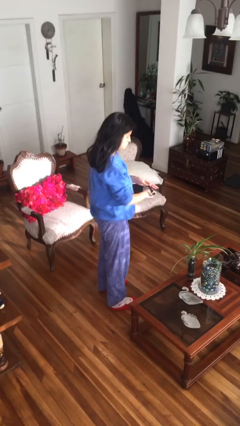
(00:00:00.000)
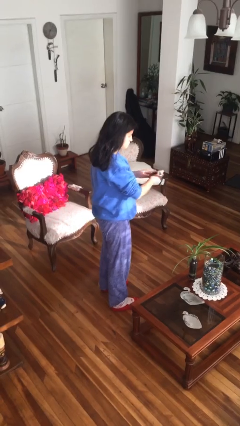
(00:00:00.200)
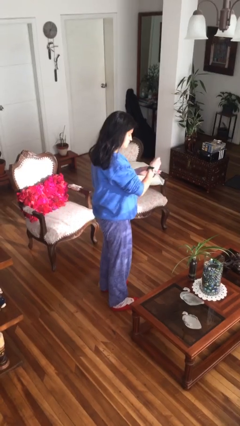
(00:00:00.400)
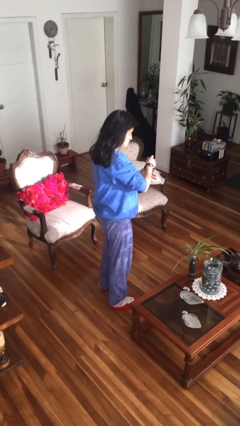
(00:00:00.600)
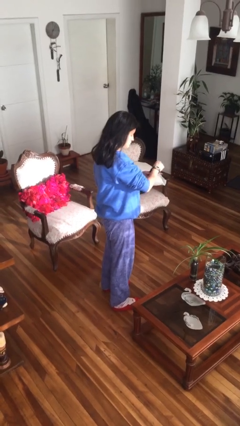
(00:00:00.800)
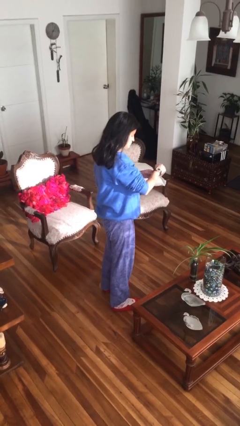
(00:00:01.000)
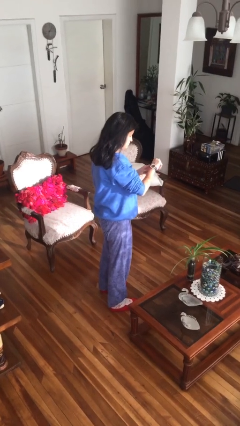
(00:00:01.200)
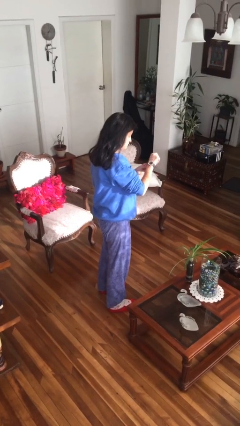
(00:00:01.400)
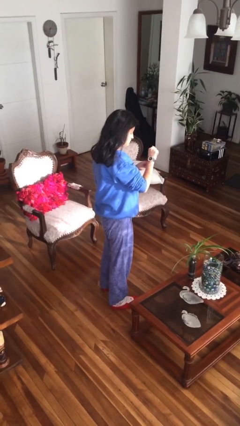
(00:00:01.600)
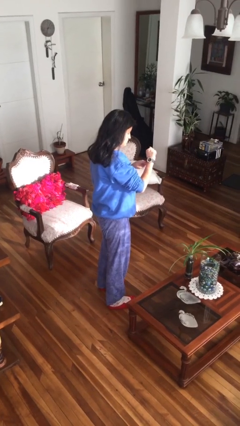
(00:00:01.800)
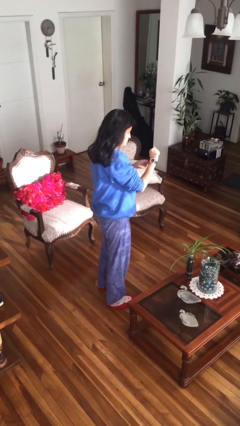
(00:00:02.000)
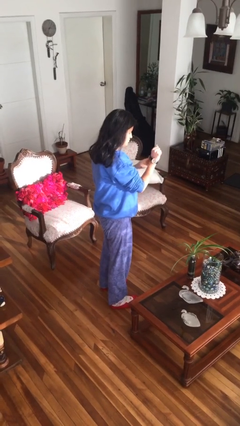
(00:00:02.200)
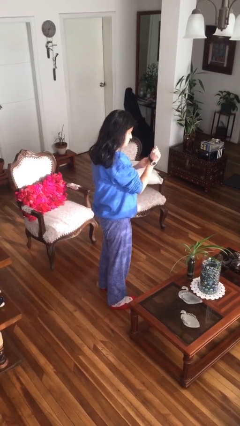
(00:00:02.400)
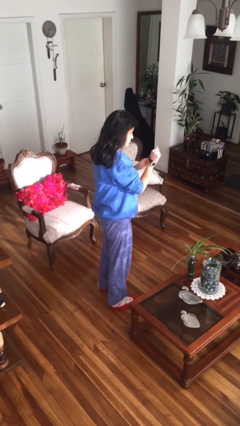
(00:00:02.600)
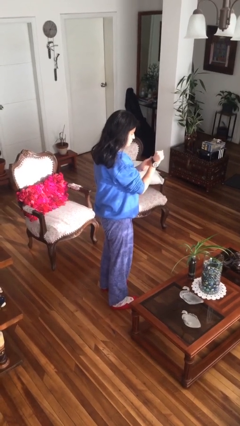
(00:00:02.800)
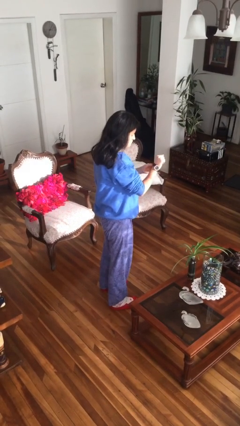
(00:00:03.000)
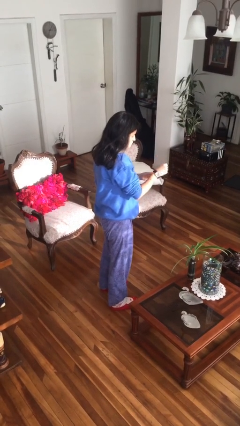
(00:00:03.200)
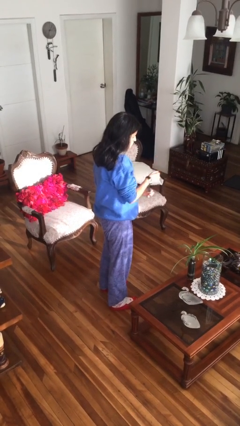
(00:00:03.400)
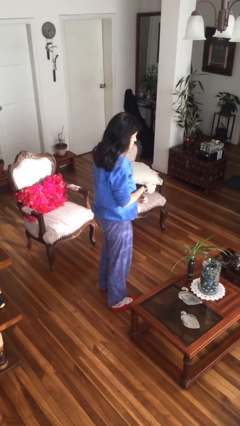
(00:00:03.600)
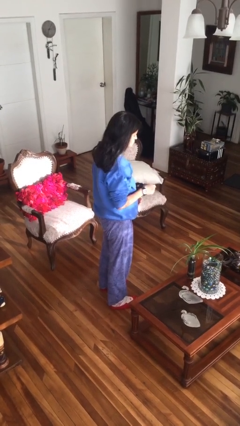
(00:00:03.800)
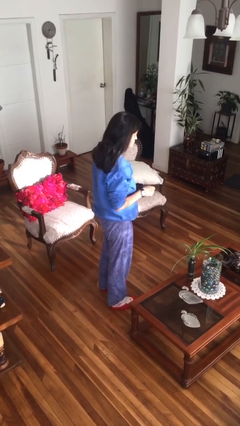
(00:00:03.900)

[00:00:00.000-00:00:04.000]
person puts on wristwatch

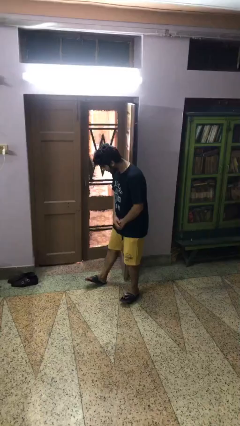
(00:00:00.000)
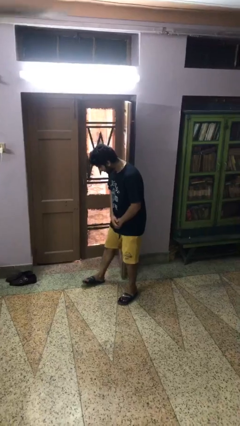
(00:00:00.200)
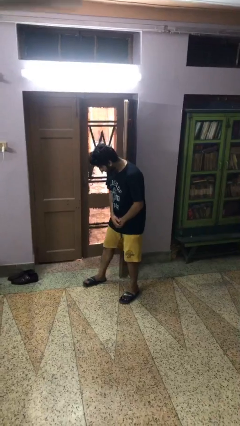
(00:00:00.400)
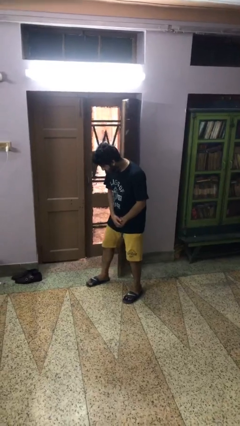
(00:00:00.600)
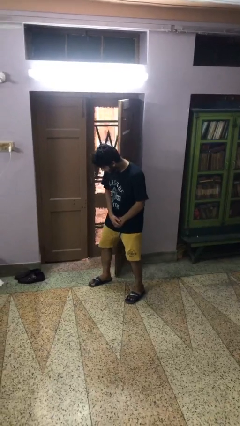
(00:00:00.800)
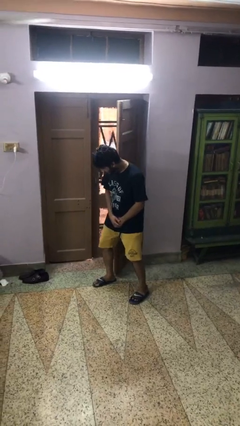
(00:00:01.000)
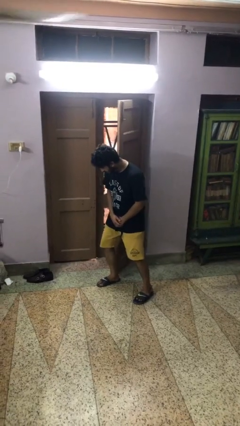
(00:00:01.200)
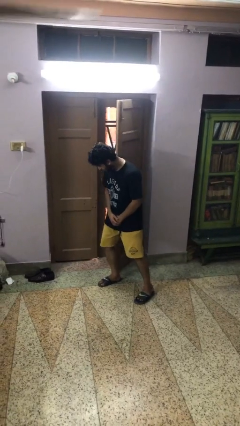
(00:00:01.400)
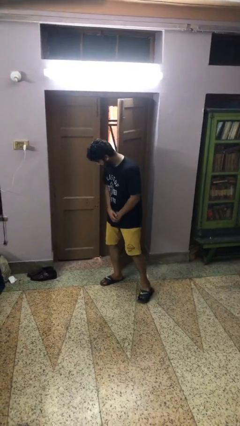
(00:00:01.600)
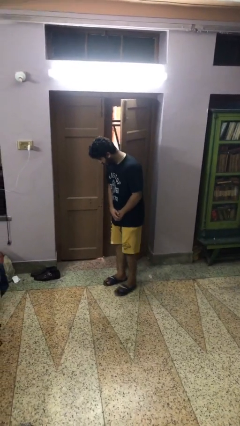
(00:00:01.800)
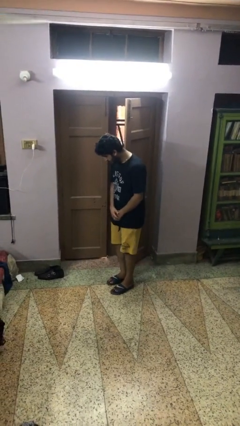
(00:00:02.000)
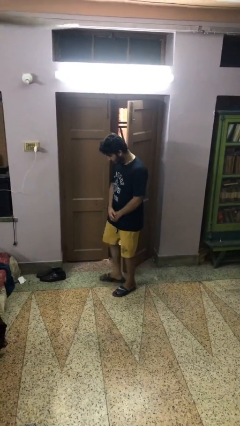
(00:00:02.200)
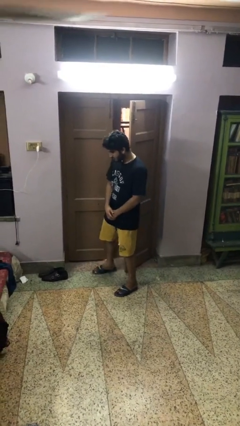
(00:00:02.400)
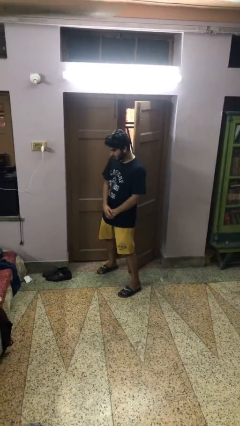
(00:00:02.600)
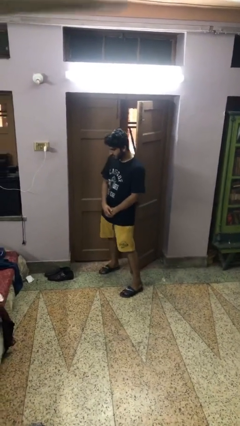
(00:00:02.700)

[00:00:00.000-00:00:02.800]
person closes door with hip

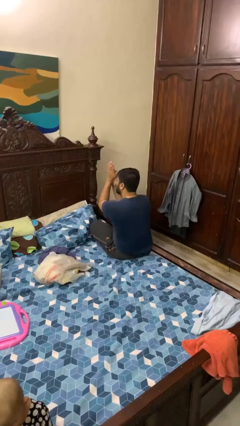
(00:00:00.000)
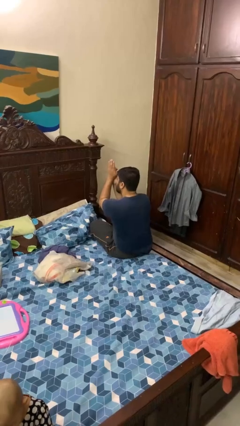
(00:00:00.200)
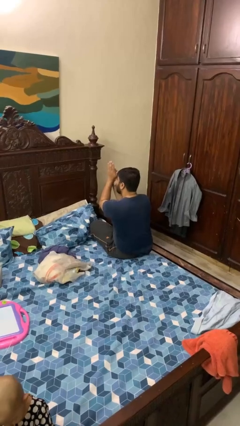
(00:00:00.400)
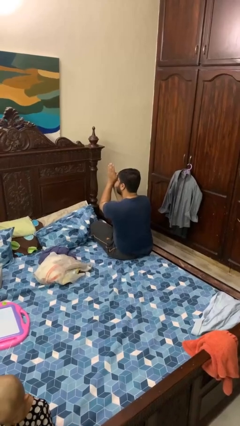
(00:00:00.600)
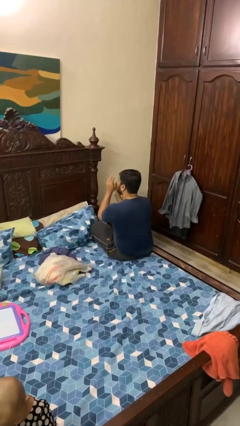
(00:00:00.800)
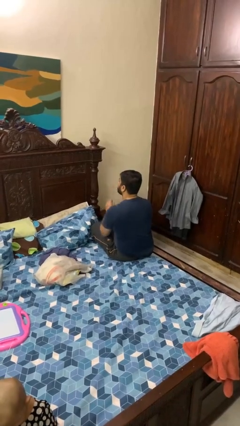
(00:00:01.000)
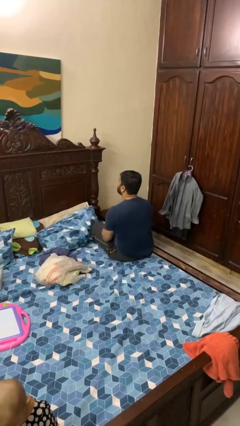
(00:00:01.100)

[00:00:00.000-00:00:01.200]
person claps hands

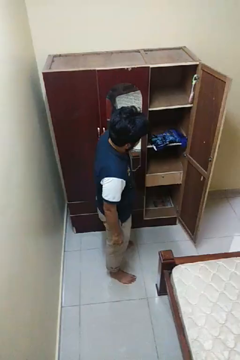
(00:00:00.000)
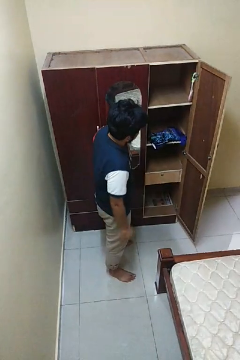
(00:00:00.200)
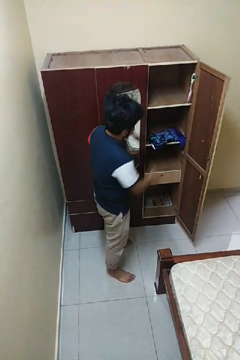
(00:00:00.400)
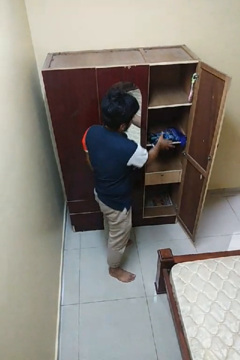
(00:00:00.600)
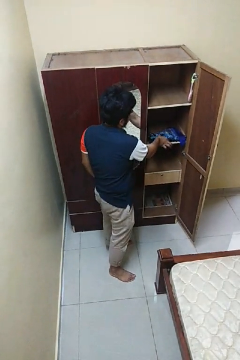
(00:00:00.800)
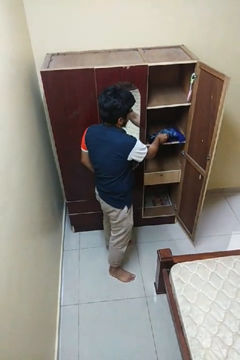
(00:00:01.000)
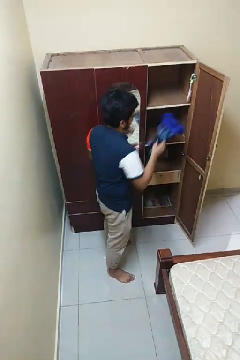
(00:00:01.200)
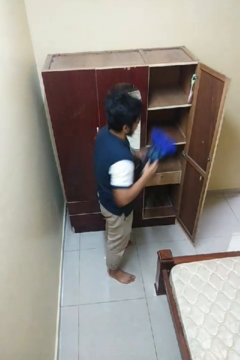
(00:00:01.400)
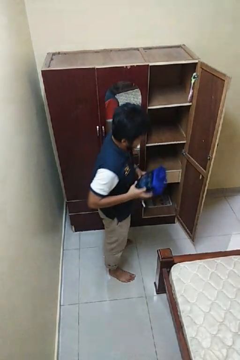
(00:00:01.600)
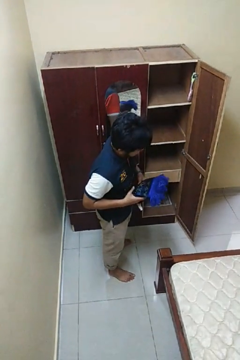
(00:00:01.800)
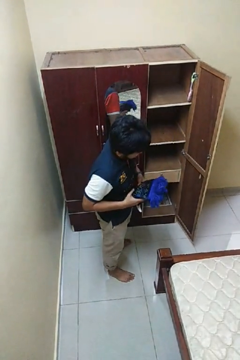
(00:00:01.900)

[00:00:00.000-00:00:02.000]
person picks up object from cabinet

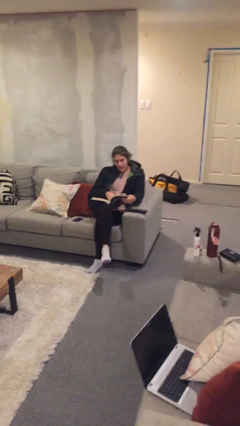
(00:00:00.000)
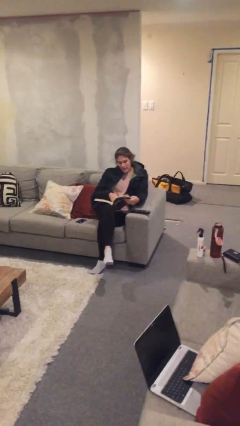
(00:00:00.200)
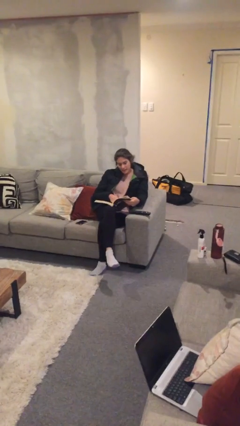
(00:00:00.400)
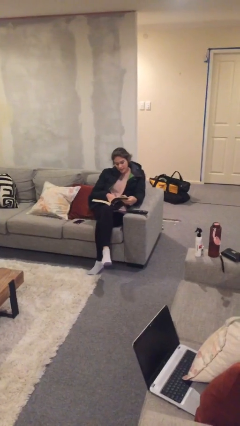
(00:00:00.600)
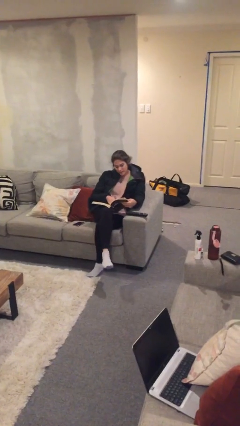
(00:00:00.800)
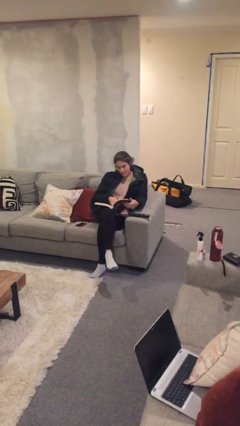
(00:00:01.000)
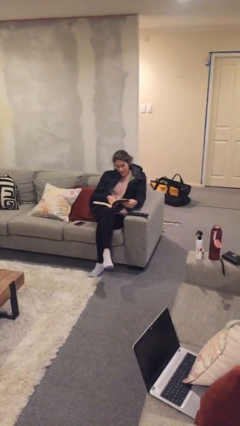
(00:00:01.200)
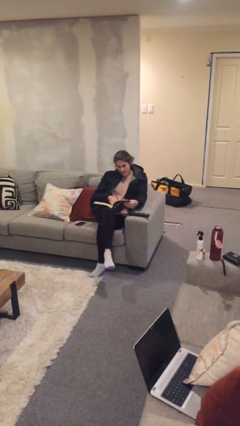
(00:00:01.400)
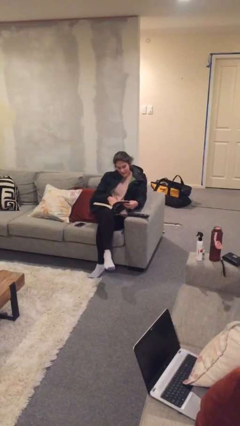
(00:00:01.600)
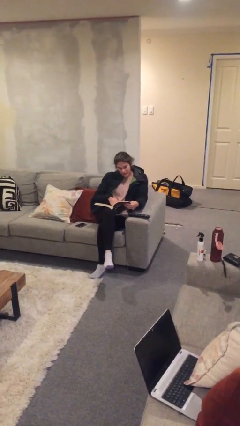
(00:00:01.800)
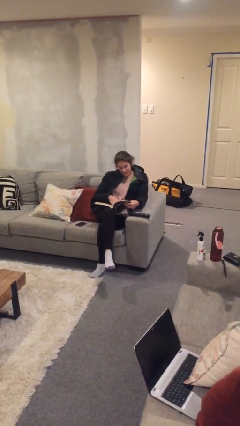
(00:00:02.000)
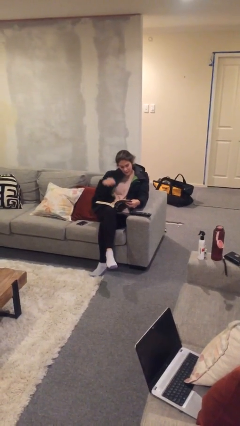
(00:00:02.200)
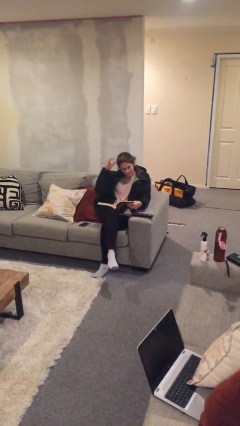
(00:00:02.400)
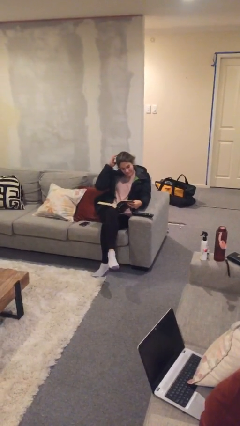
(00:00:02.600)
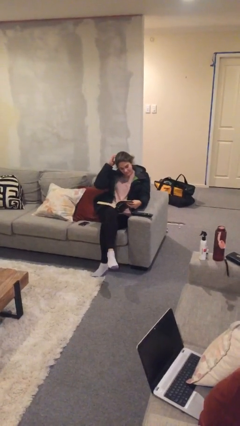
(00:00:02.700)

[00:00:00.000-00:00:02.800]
person reads document

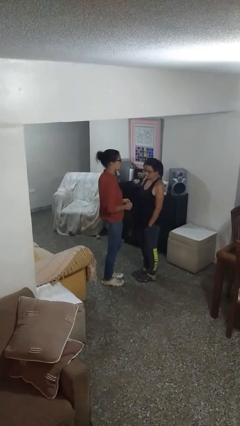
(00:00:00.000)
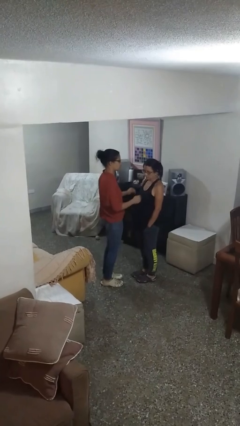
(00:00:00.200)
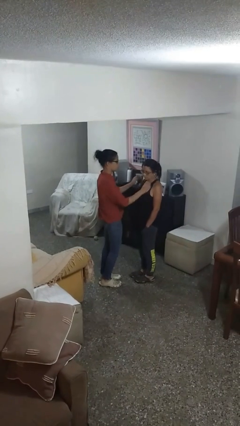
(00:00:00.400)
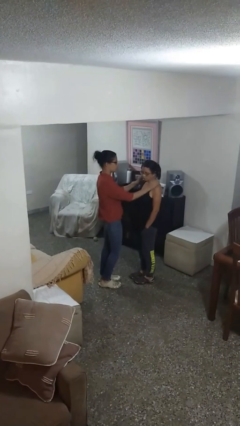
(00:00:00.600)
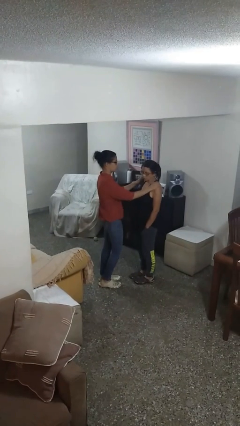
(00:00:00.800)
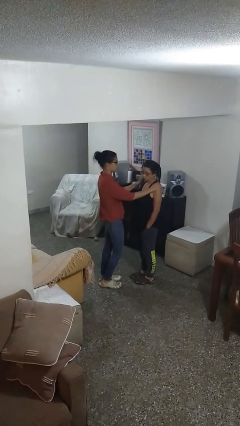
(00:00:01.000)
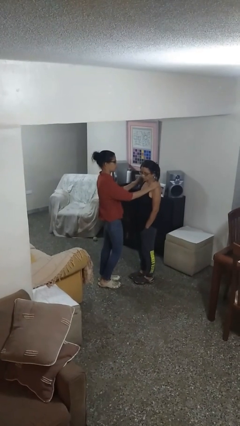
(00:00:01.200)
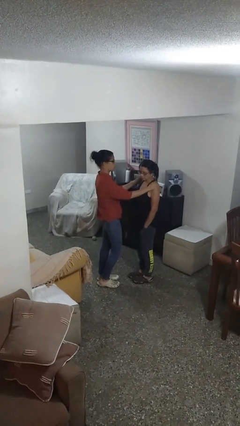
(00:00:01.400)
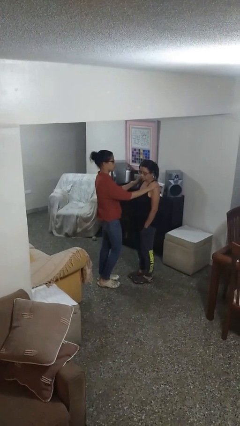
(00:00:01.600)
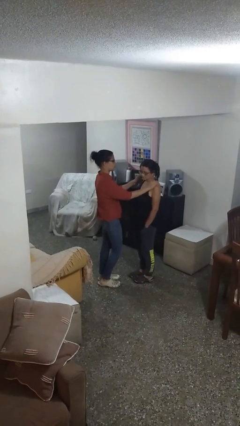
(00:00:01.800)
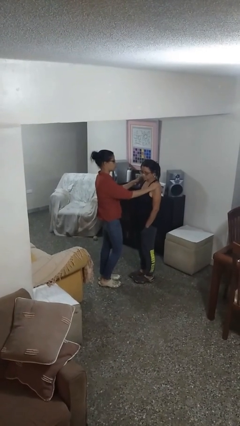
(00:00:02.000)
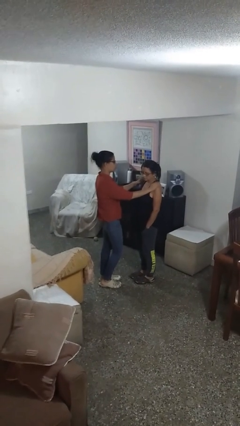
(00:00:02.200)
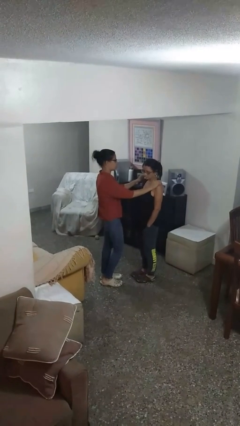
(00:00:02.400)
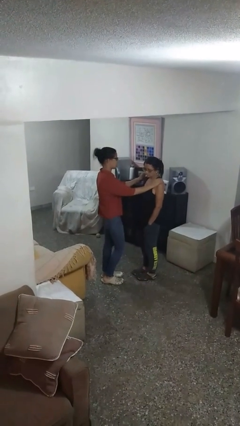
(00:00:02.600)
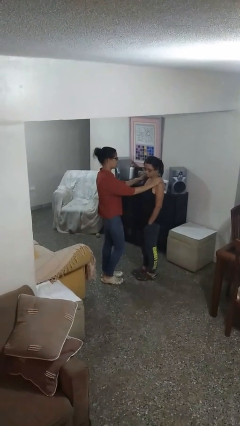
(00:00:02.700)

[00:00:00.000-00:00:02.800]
person pounds shoulders of person

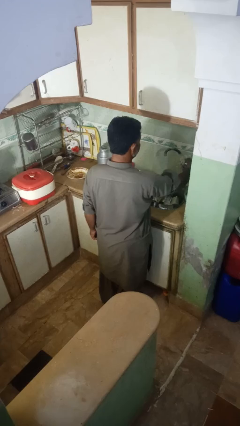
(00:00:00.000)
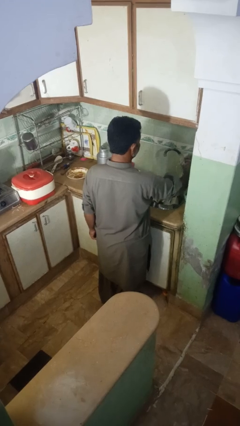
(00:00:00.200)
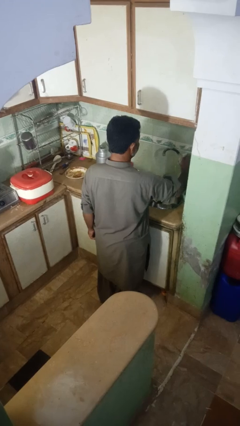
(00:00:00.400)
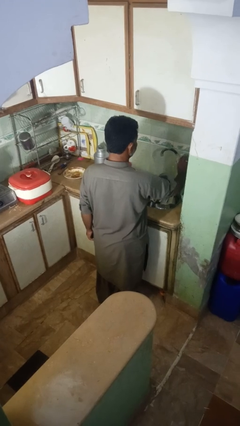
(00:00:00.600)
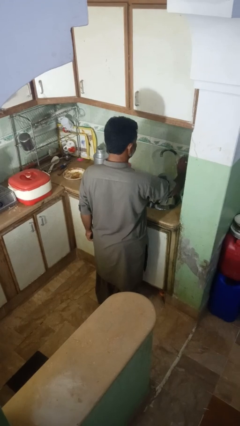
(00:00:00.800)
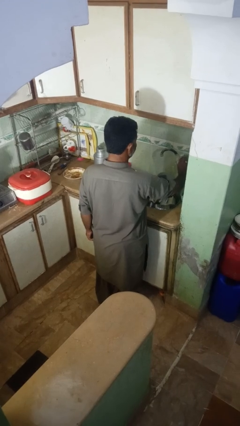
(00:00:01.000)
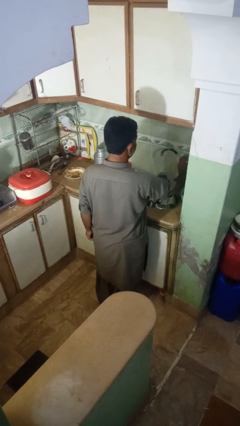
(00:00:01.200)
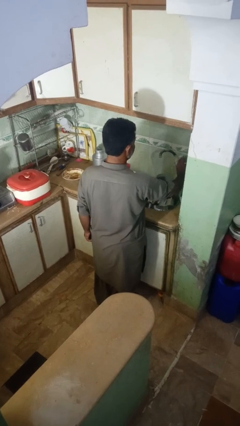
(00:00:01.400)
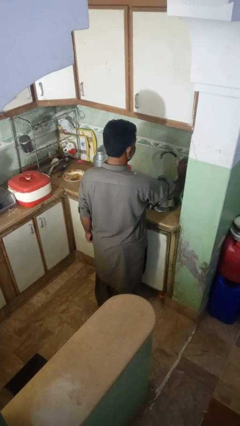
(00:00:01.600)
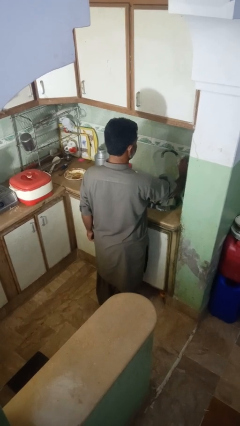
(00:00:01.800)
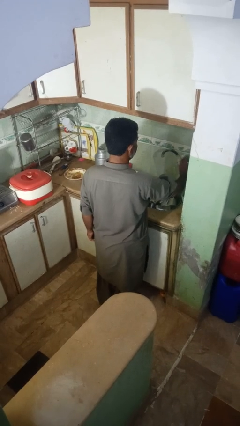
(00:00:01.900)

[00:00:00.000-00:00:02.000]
person turns on faucet
